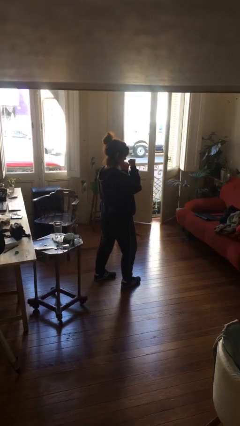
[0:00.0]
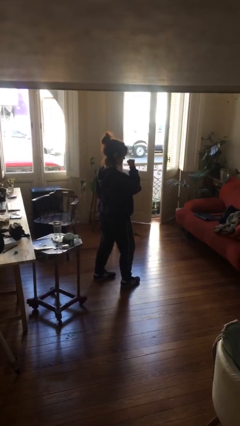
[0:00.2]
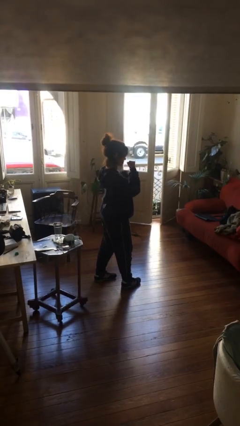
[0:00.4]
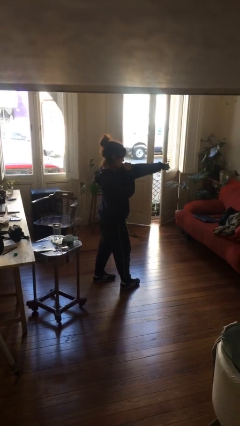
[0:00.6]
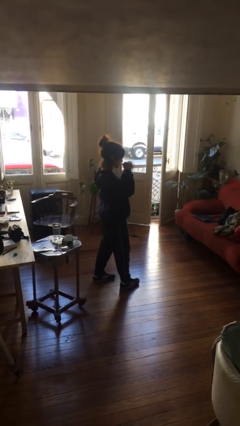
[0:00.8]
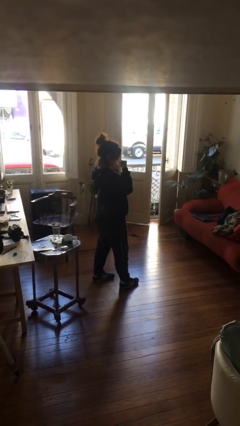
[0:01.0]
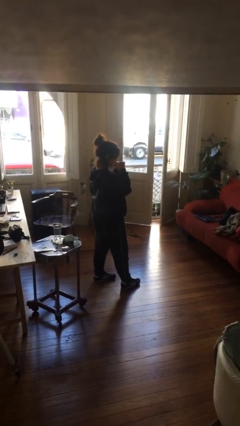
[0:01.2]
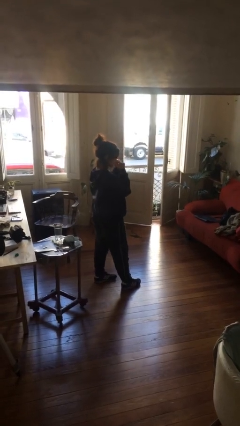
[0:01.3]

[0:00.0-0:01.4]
person punches

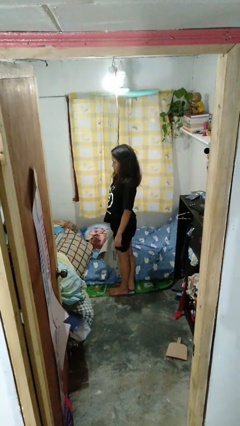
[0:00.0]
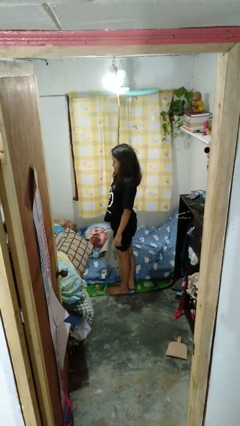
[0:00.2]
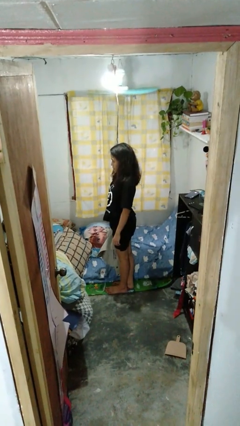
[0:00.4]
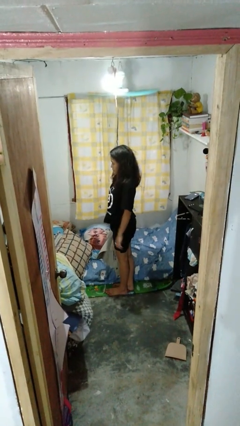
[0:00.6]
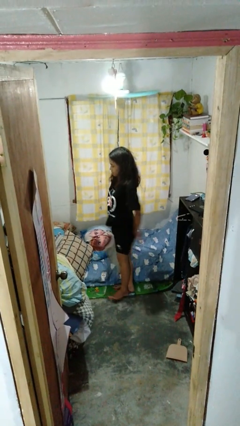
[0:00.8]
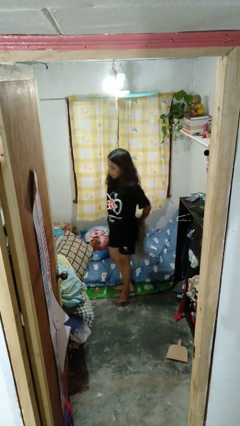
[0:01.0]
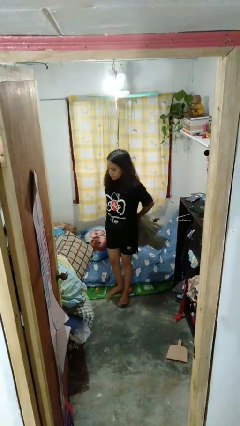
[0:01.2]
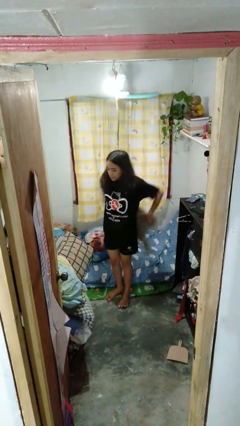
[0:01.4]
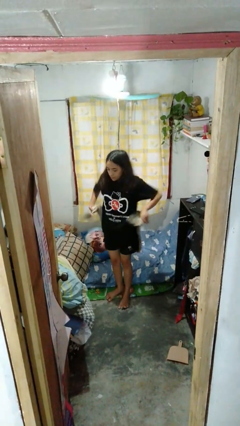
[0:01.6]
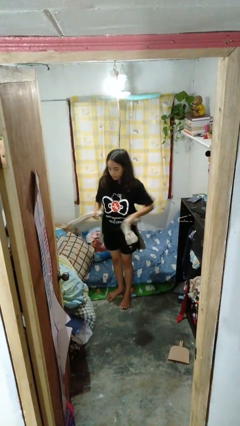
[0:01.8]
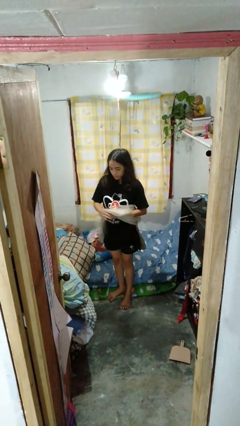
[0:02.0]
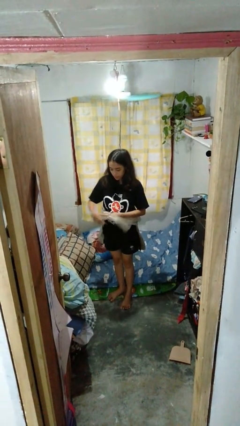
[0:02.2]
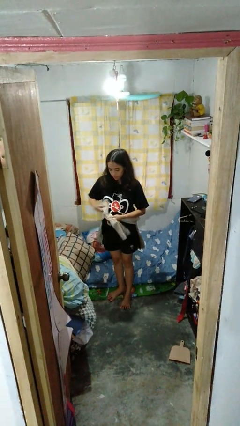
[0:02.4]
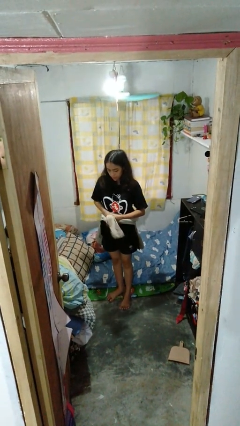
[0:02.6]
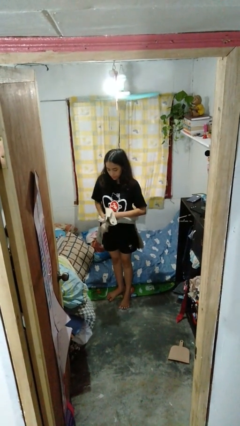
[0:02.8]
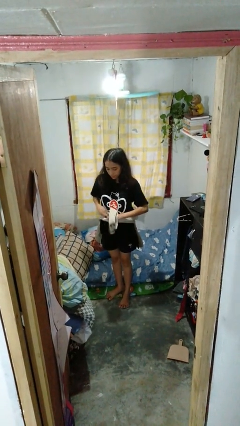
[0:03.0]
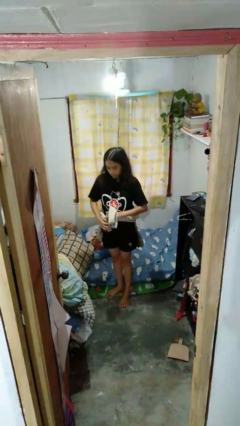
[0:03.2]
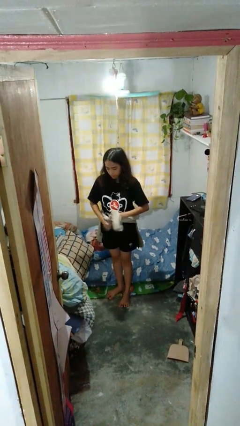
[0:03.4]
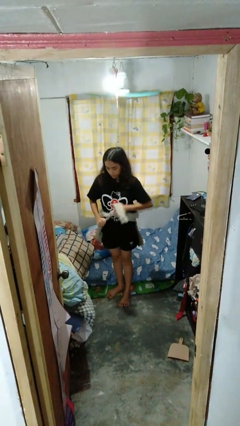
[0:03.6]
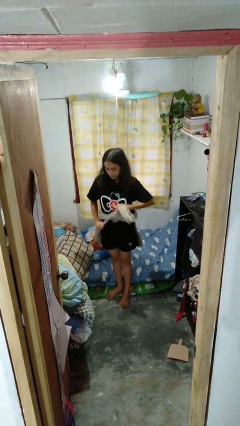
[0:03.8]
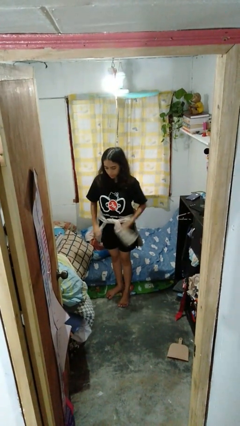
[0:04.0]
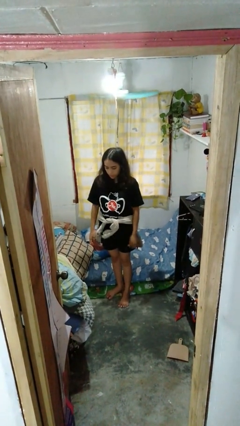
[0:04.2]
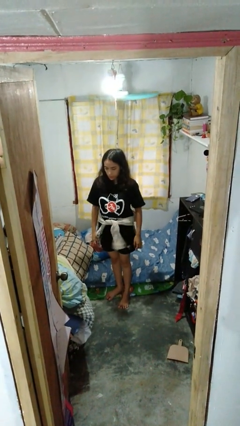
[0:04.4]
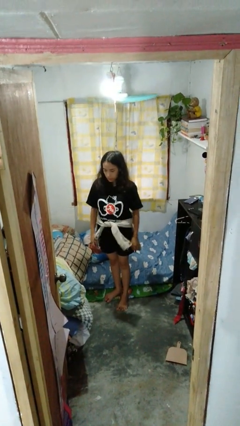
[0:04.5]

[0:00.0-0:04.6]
person ties jacket around waist

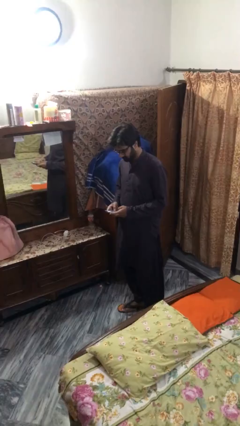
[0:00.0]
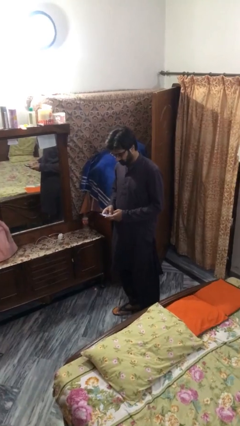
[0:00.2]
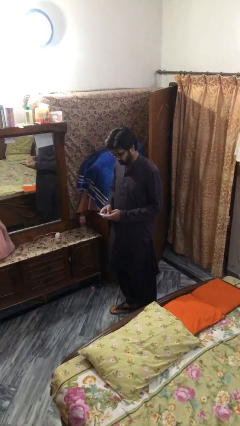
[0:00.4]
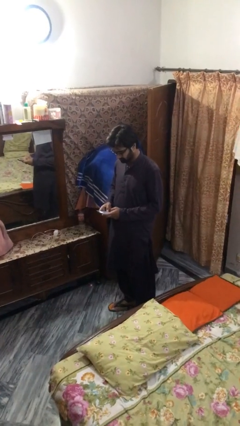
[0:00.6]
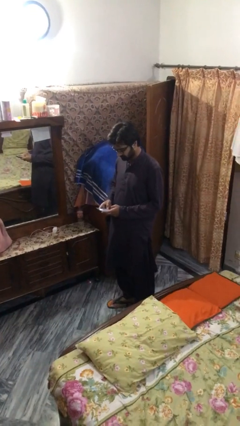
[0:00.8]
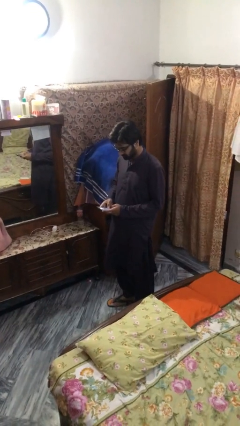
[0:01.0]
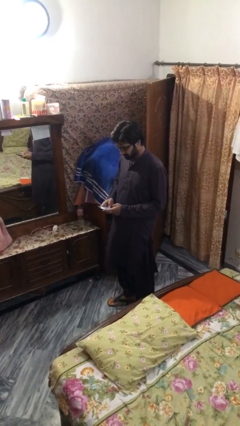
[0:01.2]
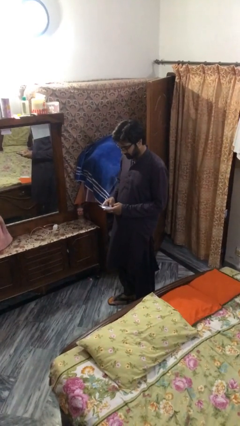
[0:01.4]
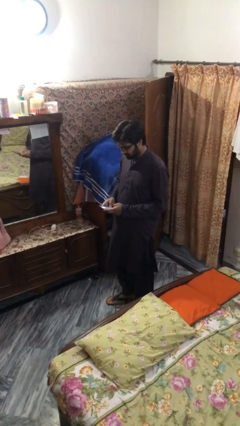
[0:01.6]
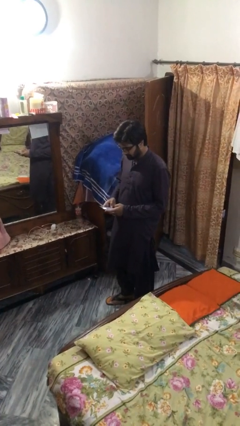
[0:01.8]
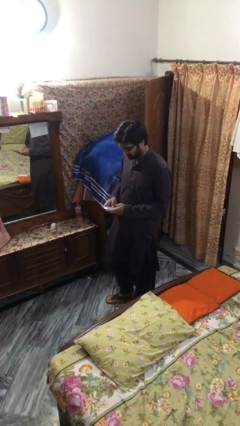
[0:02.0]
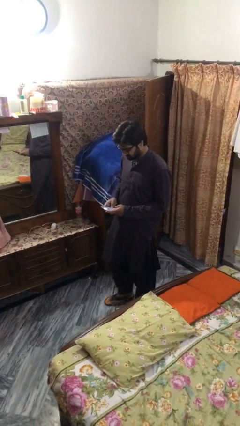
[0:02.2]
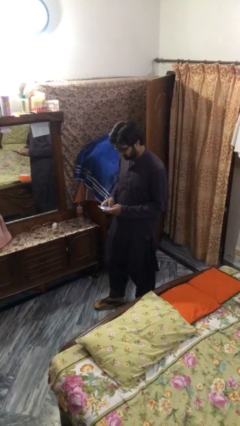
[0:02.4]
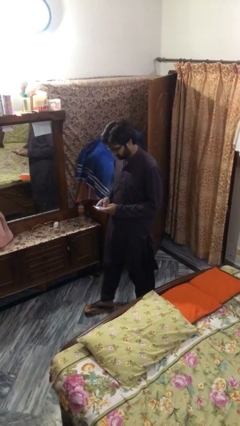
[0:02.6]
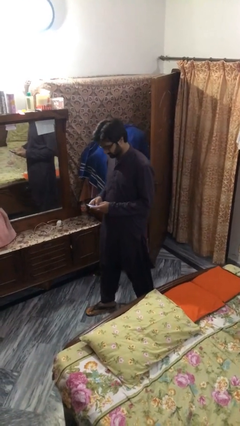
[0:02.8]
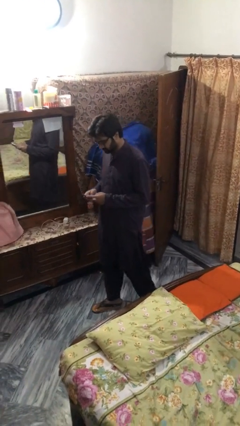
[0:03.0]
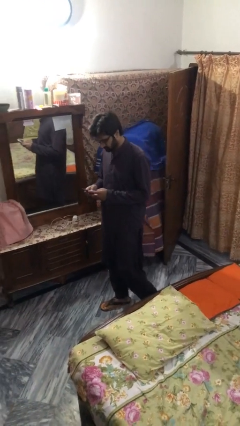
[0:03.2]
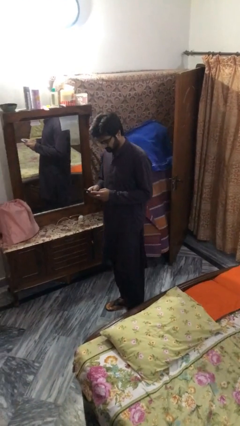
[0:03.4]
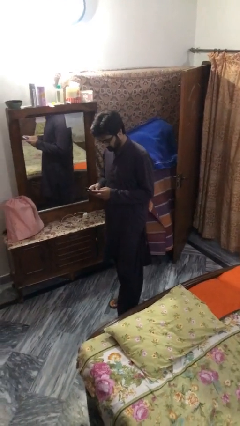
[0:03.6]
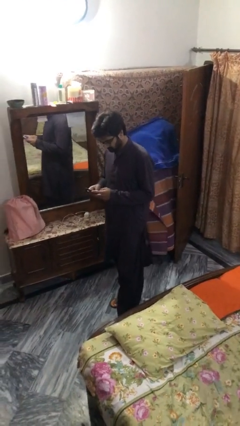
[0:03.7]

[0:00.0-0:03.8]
person texts on phone

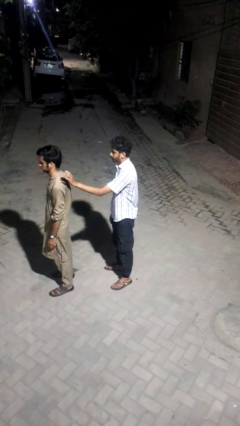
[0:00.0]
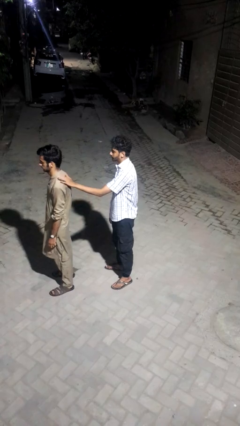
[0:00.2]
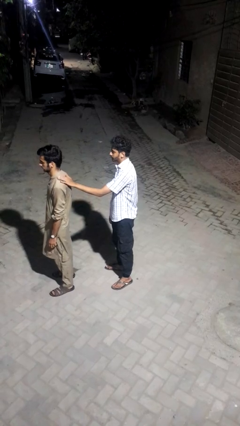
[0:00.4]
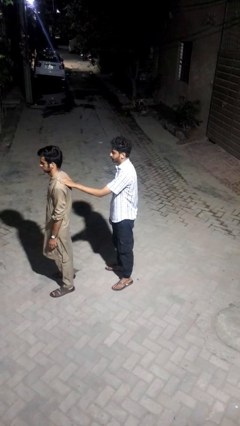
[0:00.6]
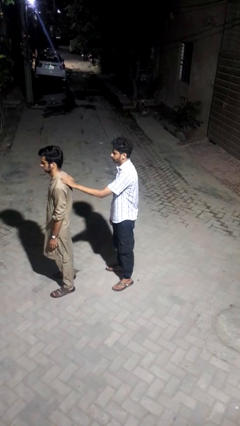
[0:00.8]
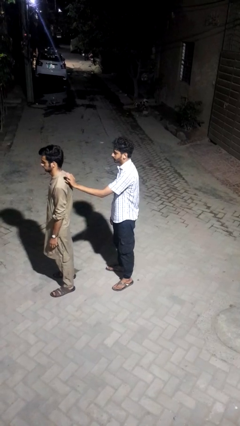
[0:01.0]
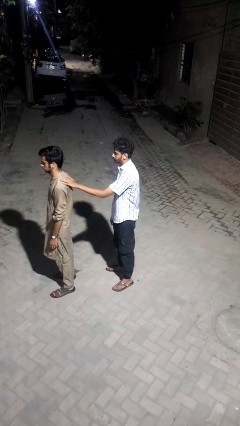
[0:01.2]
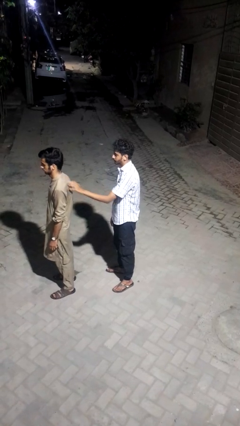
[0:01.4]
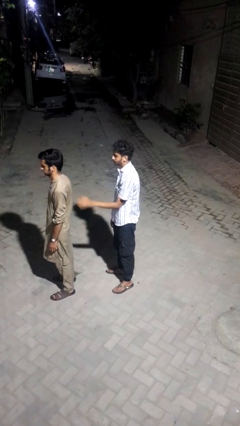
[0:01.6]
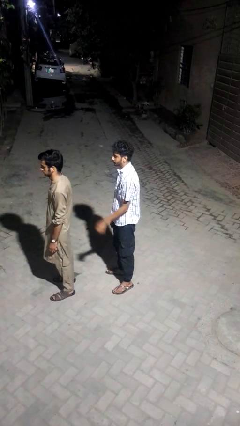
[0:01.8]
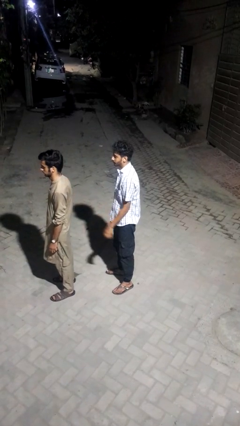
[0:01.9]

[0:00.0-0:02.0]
person touches back of person

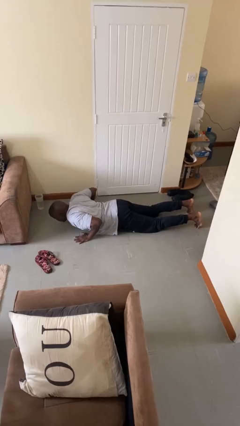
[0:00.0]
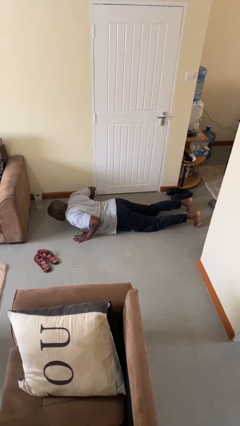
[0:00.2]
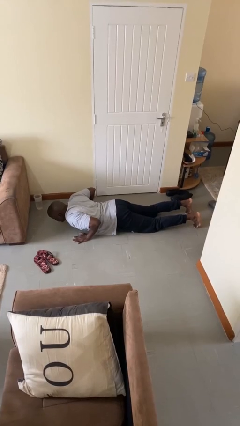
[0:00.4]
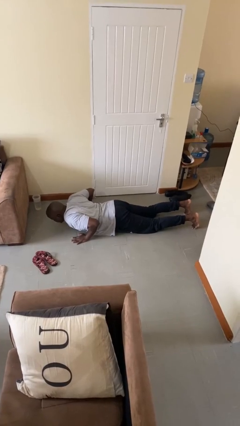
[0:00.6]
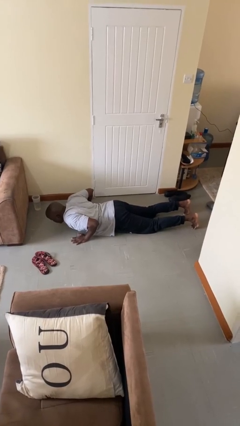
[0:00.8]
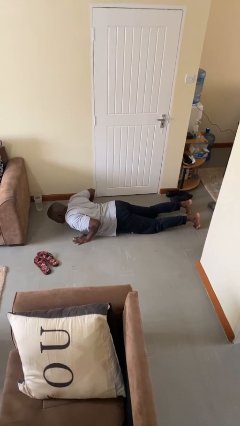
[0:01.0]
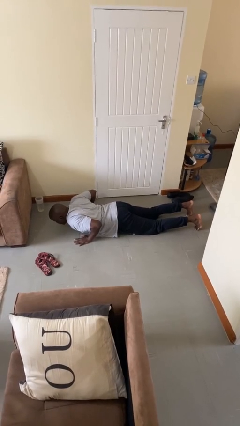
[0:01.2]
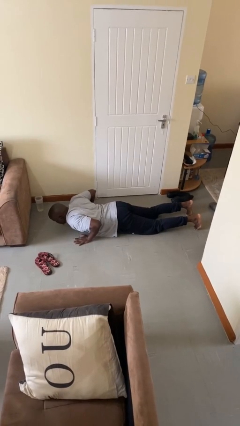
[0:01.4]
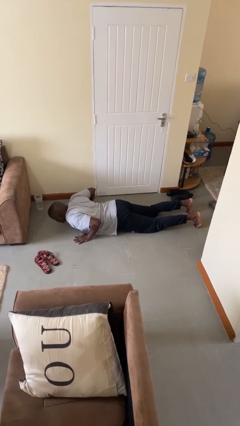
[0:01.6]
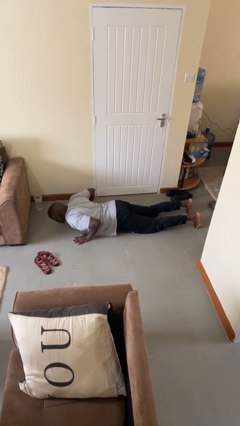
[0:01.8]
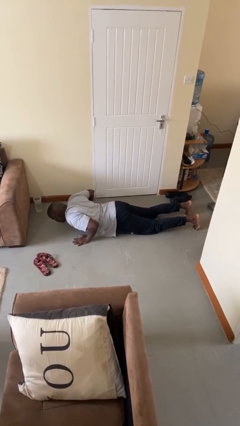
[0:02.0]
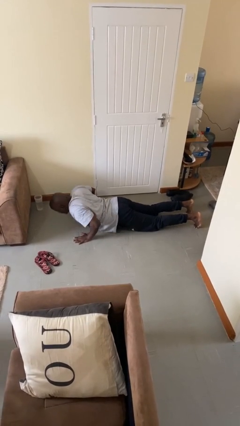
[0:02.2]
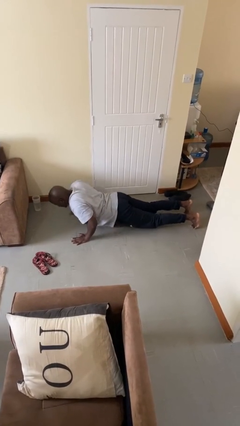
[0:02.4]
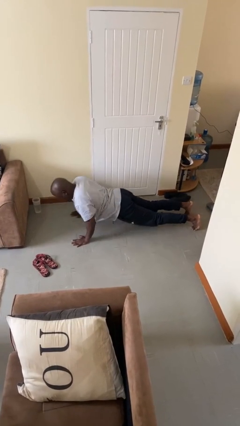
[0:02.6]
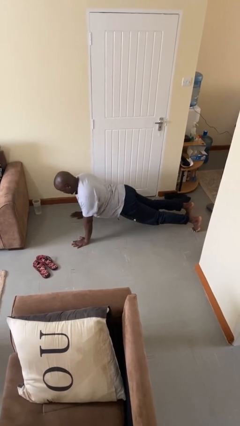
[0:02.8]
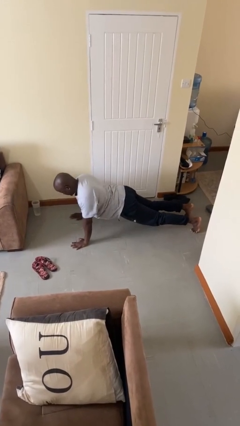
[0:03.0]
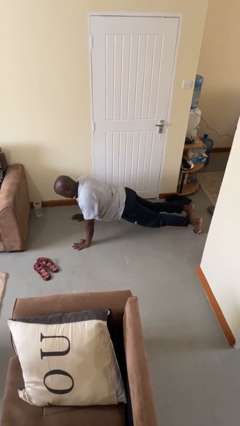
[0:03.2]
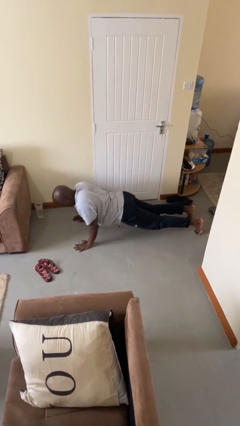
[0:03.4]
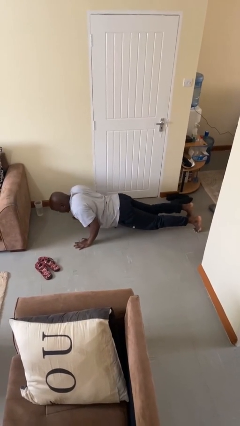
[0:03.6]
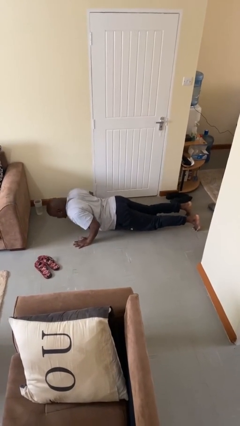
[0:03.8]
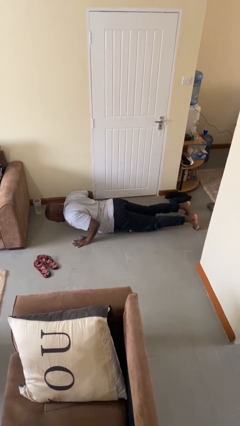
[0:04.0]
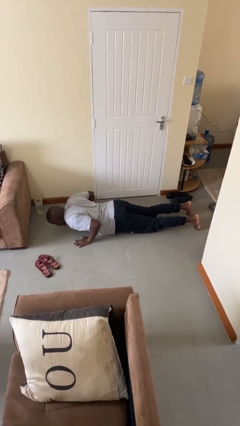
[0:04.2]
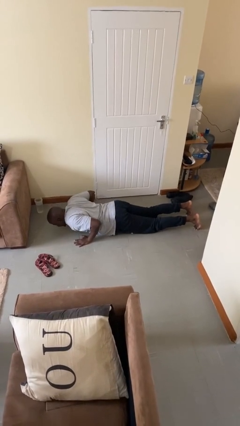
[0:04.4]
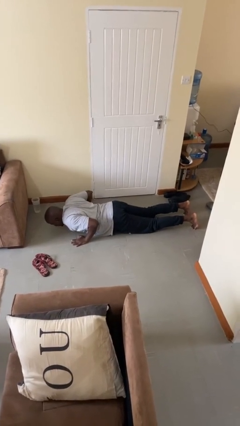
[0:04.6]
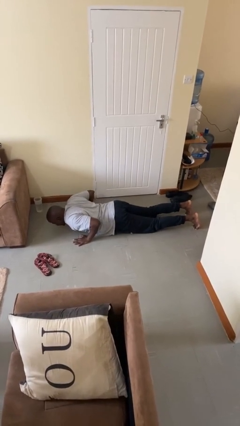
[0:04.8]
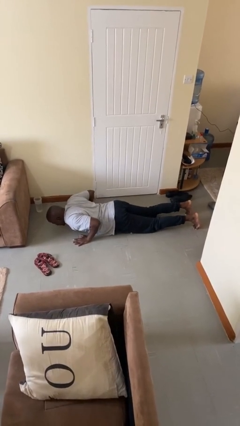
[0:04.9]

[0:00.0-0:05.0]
person exercises with pushup

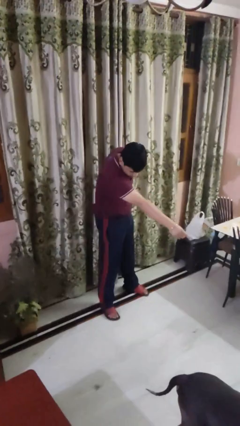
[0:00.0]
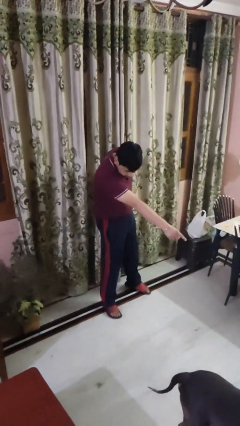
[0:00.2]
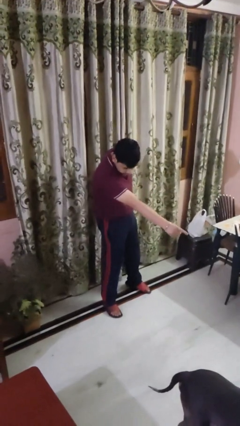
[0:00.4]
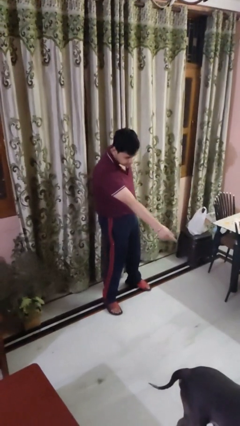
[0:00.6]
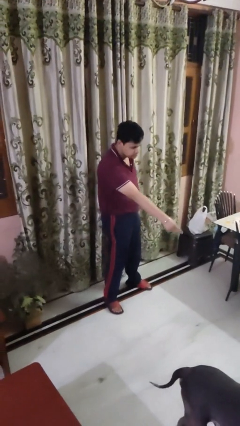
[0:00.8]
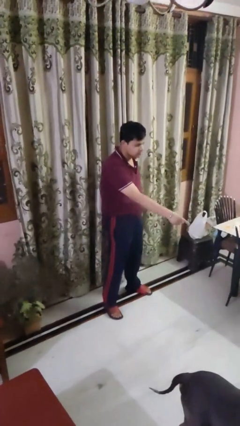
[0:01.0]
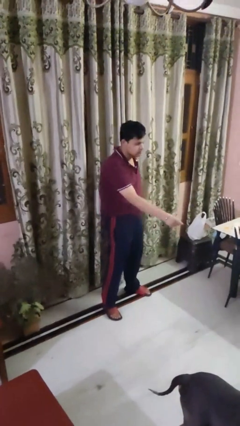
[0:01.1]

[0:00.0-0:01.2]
person points to dog
